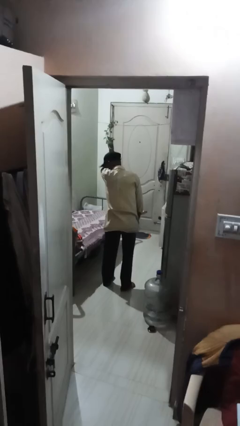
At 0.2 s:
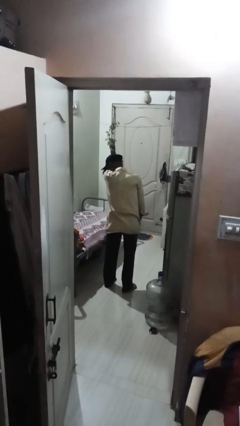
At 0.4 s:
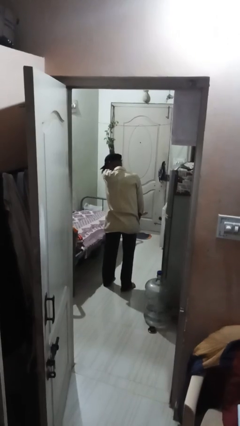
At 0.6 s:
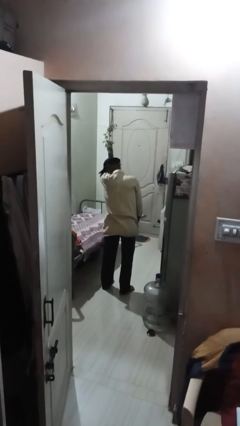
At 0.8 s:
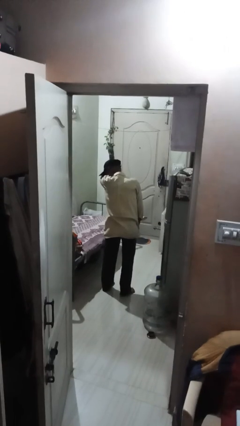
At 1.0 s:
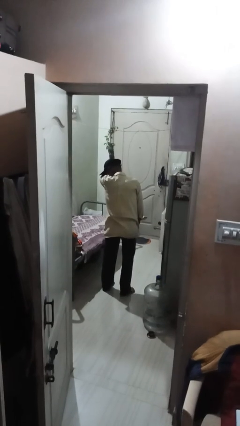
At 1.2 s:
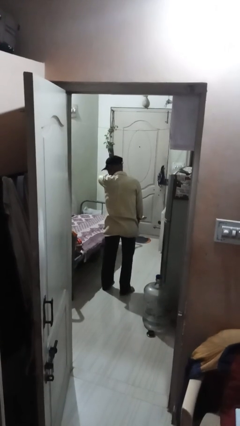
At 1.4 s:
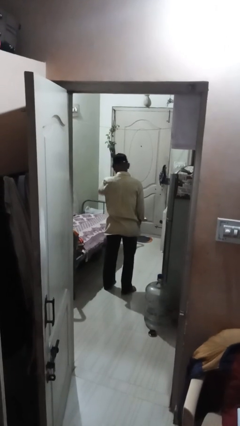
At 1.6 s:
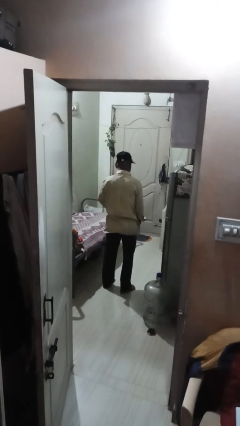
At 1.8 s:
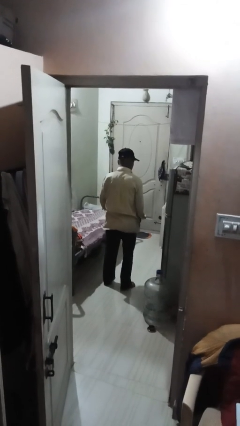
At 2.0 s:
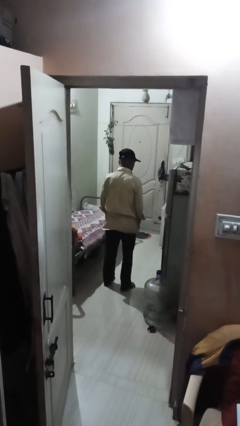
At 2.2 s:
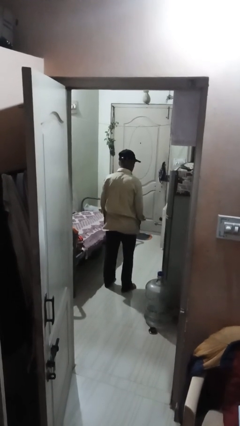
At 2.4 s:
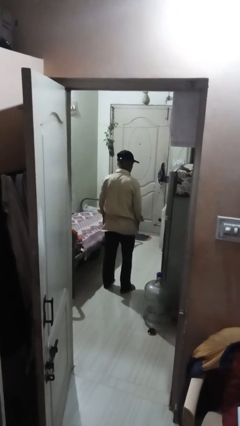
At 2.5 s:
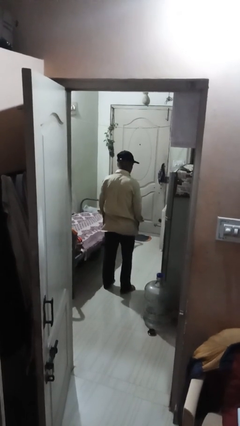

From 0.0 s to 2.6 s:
person shrugs

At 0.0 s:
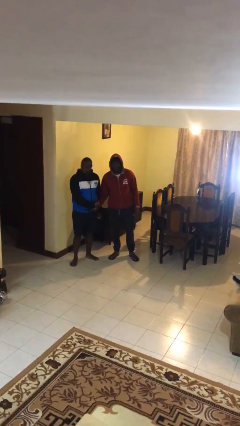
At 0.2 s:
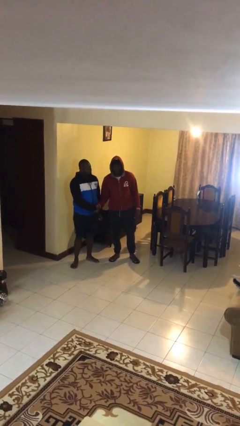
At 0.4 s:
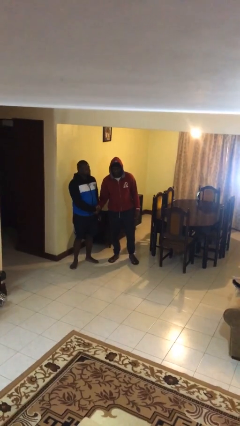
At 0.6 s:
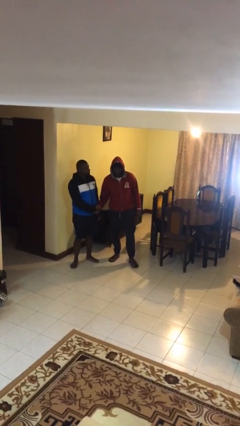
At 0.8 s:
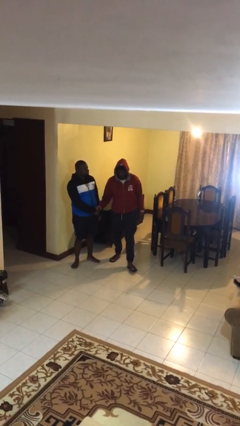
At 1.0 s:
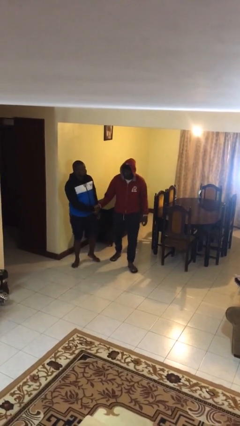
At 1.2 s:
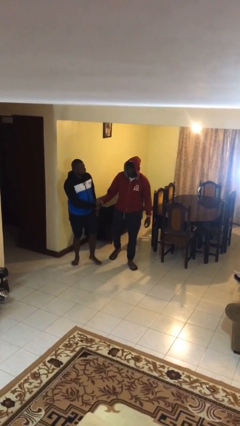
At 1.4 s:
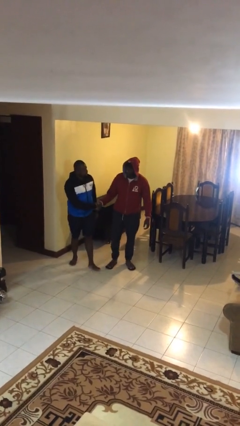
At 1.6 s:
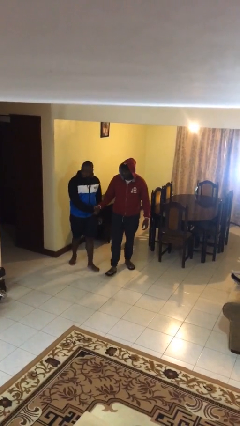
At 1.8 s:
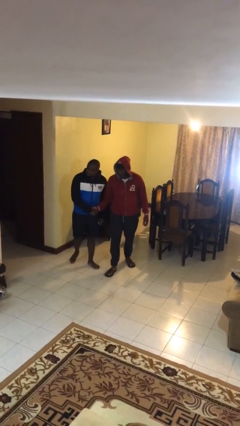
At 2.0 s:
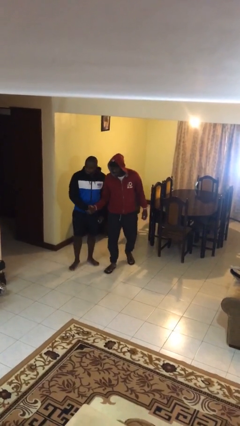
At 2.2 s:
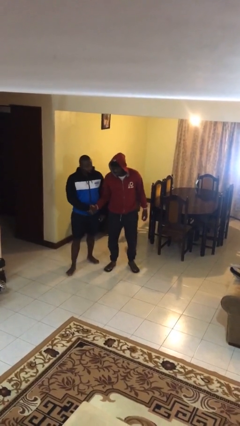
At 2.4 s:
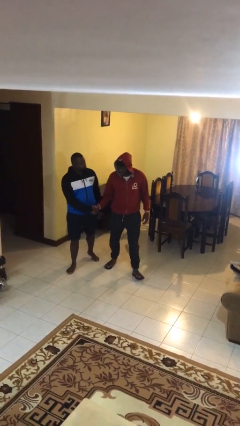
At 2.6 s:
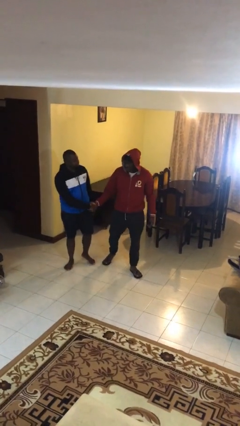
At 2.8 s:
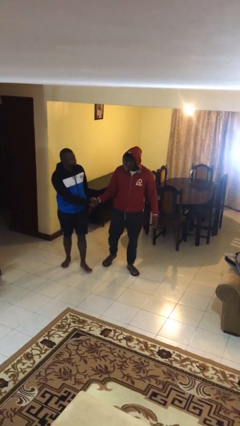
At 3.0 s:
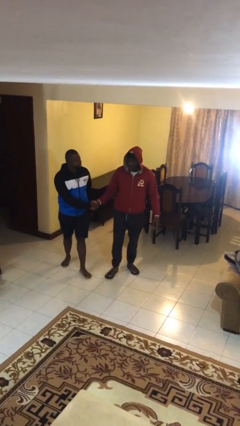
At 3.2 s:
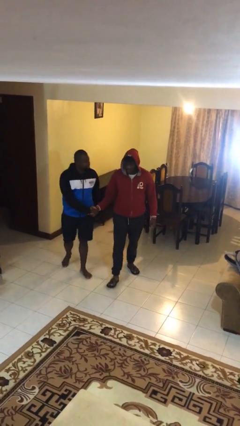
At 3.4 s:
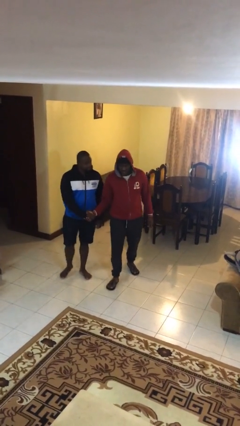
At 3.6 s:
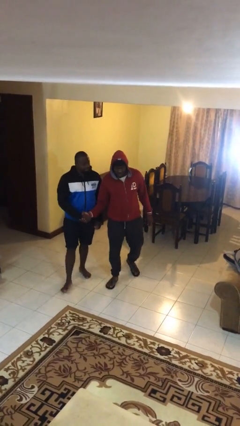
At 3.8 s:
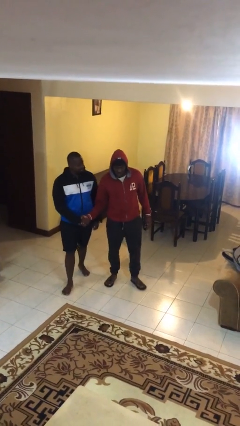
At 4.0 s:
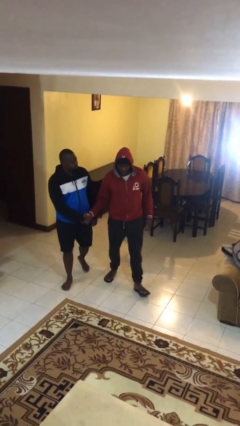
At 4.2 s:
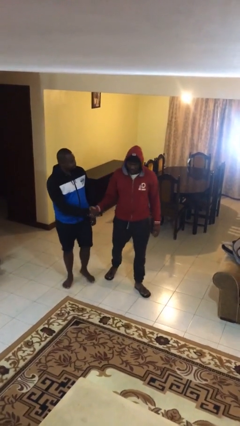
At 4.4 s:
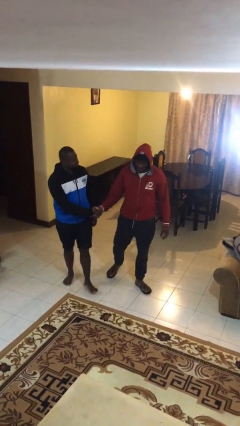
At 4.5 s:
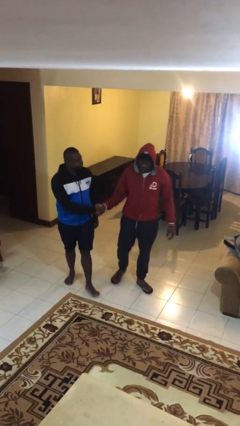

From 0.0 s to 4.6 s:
person holds hand

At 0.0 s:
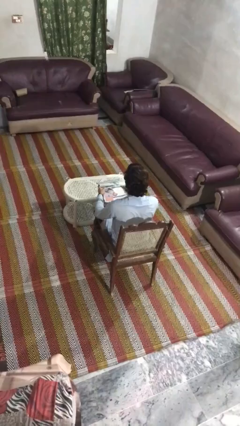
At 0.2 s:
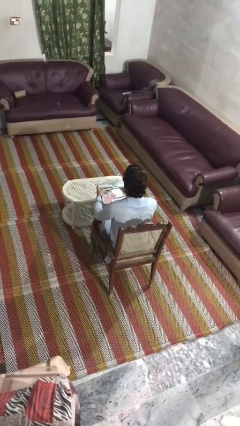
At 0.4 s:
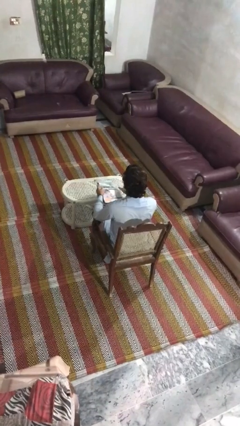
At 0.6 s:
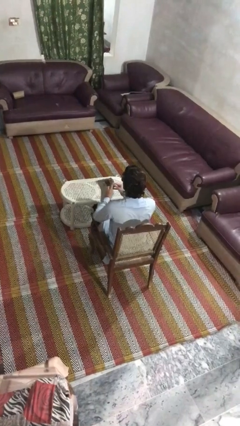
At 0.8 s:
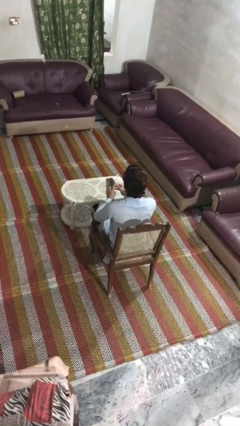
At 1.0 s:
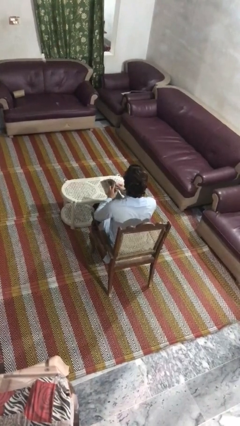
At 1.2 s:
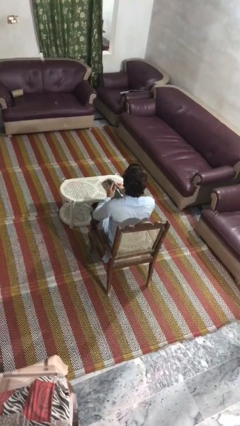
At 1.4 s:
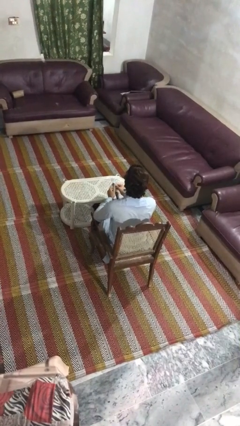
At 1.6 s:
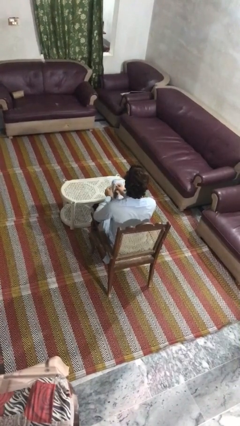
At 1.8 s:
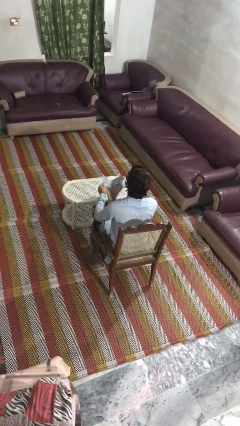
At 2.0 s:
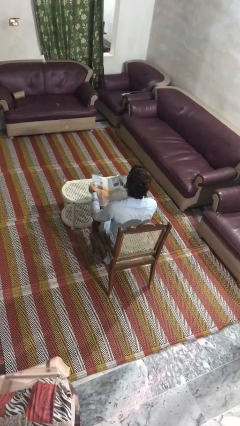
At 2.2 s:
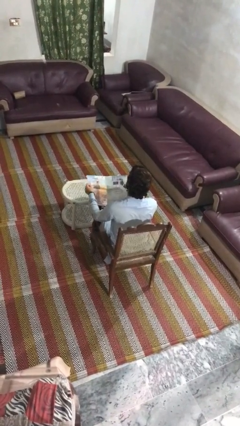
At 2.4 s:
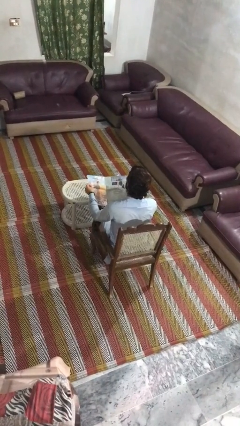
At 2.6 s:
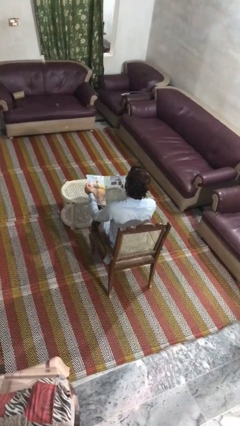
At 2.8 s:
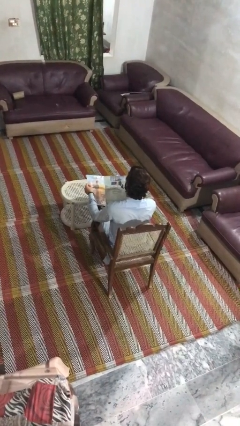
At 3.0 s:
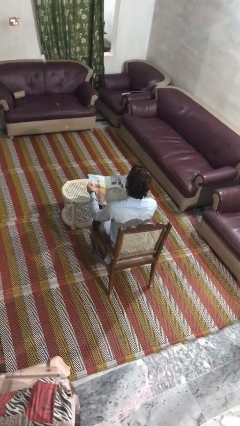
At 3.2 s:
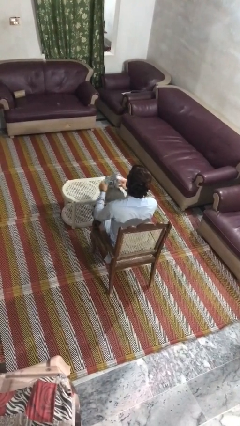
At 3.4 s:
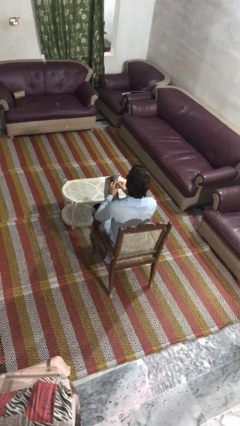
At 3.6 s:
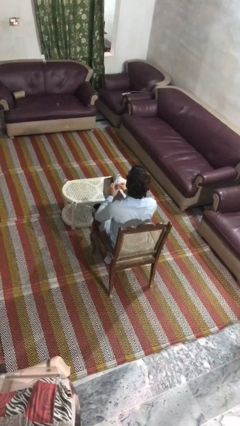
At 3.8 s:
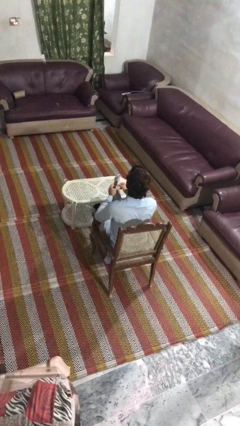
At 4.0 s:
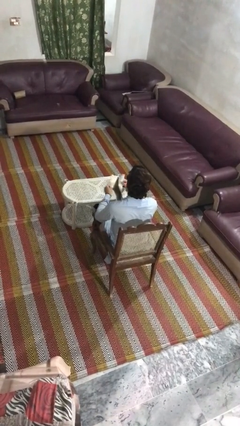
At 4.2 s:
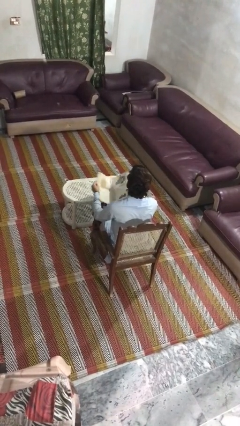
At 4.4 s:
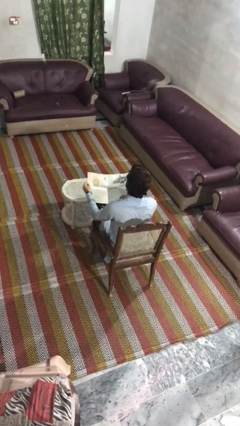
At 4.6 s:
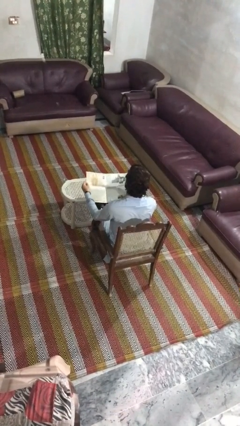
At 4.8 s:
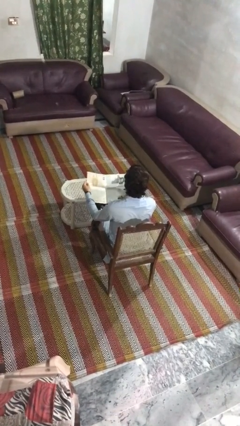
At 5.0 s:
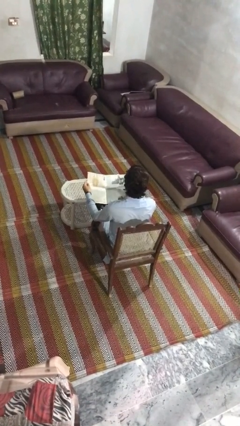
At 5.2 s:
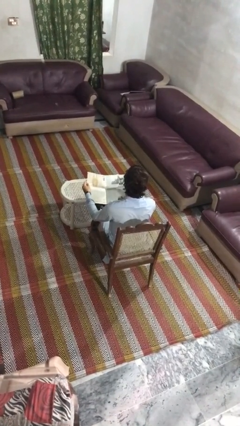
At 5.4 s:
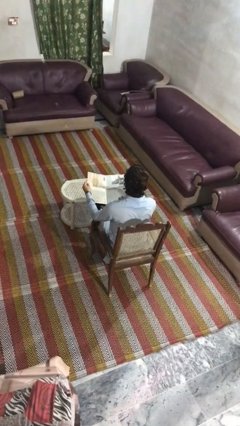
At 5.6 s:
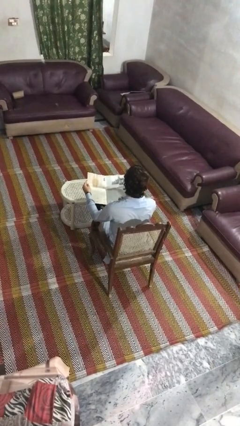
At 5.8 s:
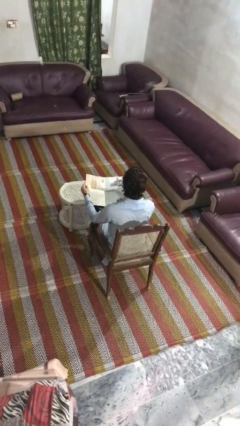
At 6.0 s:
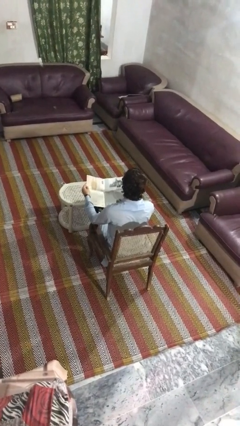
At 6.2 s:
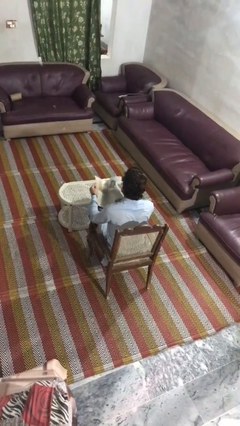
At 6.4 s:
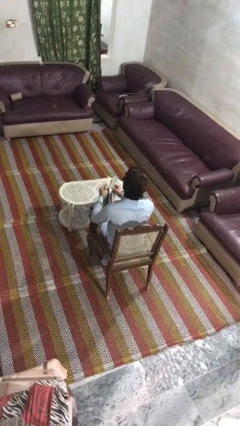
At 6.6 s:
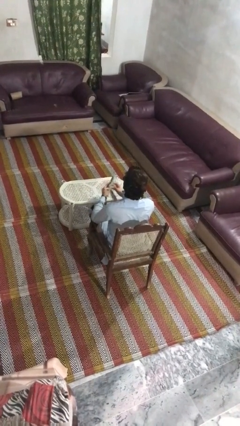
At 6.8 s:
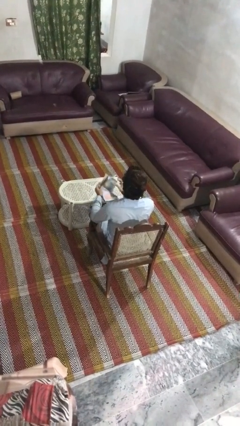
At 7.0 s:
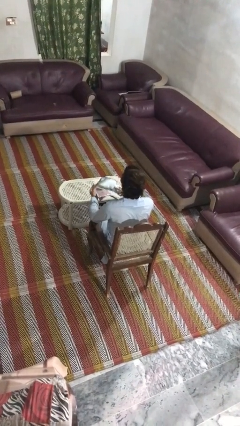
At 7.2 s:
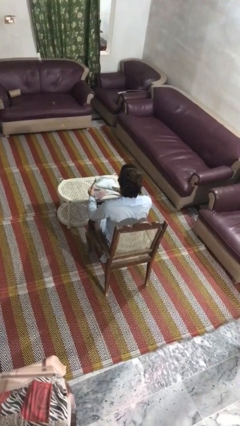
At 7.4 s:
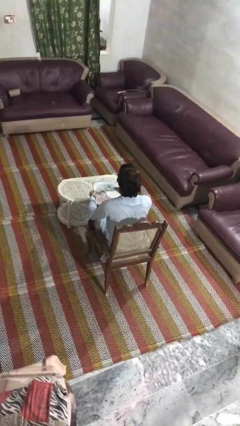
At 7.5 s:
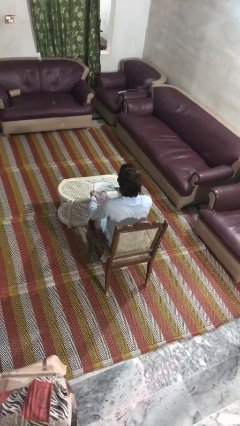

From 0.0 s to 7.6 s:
person reads magazine

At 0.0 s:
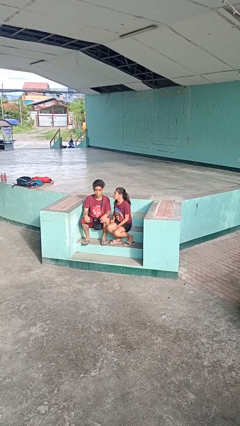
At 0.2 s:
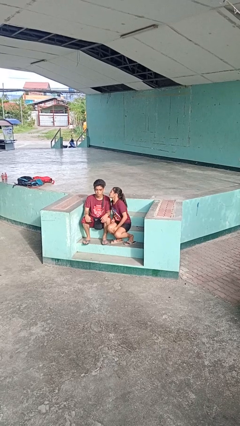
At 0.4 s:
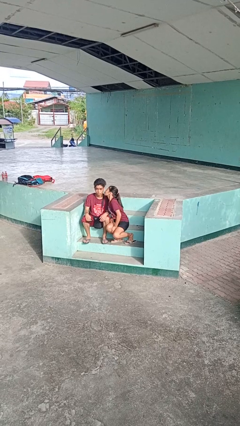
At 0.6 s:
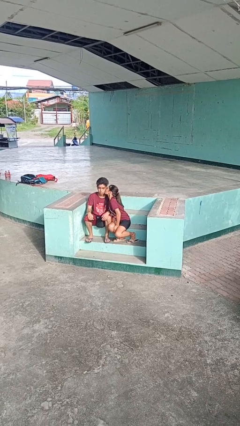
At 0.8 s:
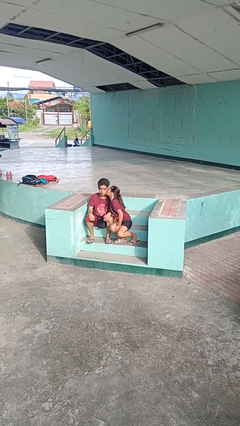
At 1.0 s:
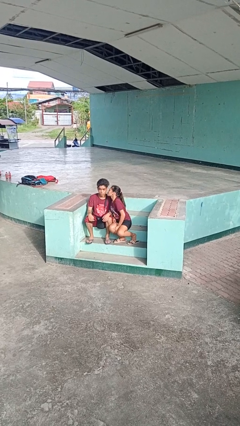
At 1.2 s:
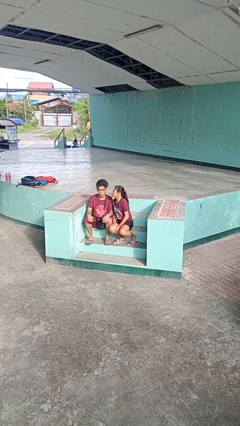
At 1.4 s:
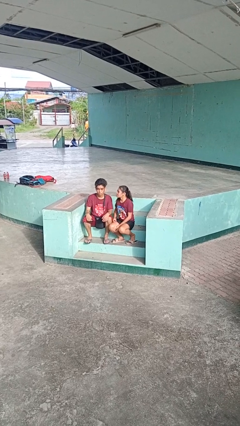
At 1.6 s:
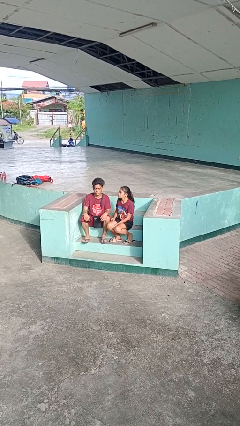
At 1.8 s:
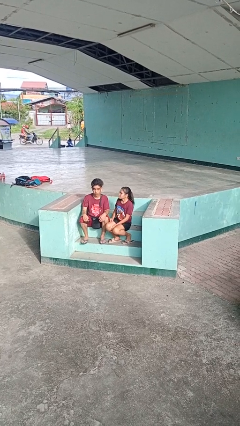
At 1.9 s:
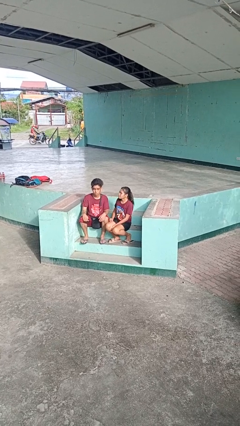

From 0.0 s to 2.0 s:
person kisses cheek of person

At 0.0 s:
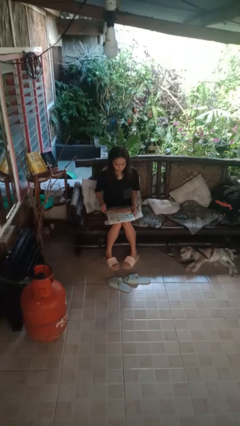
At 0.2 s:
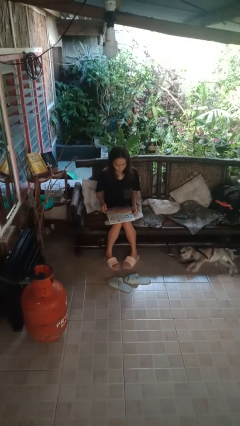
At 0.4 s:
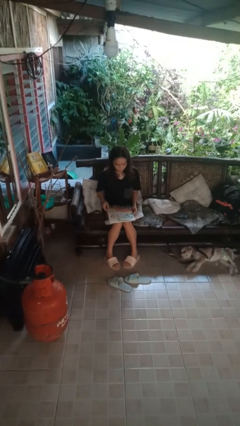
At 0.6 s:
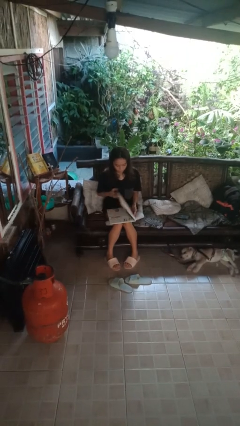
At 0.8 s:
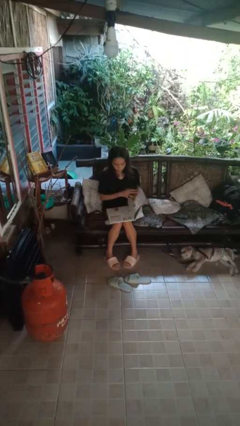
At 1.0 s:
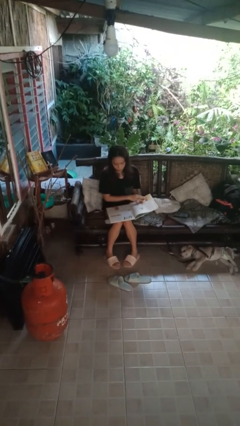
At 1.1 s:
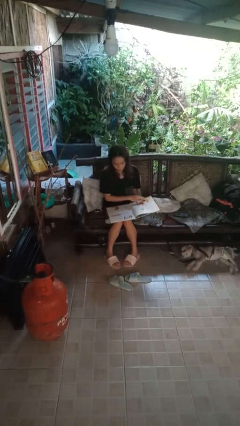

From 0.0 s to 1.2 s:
person reads book
